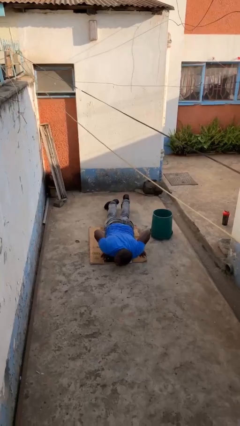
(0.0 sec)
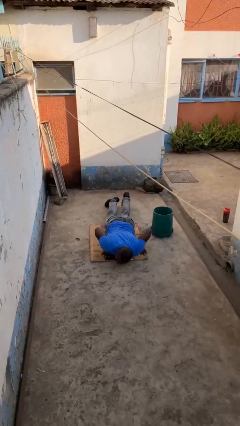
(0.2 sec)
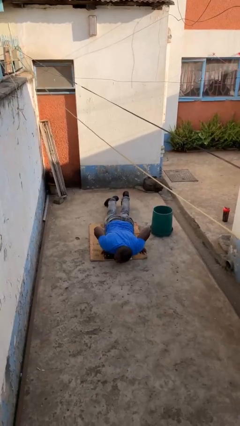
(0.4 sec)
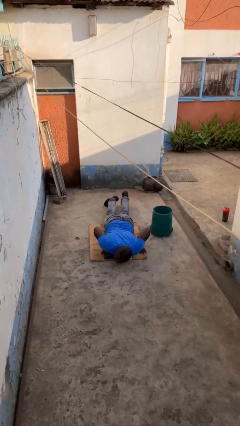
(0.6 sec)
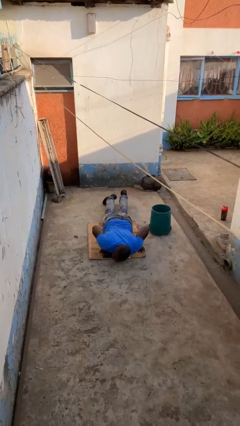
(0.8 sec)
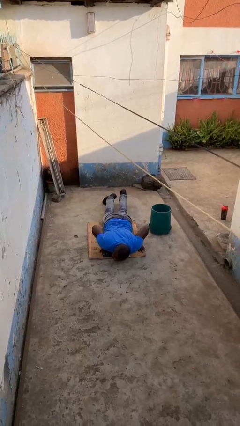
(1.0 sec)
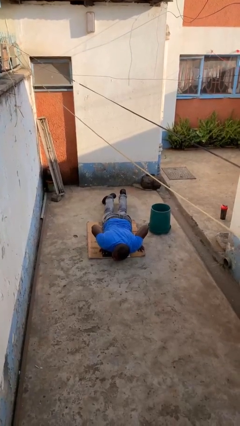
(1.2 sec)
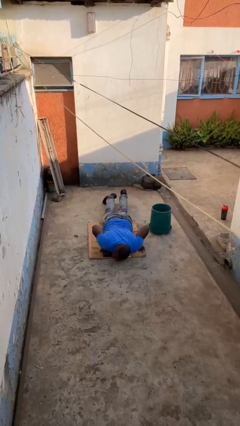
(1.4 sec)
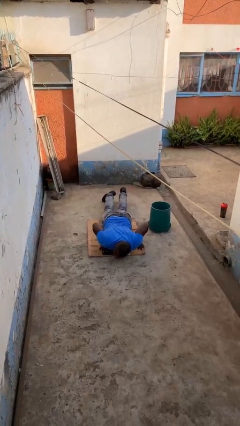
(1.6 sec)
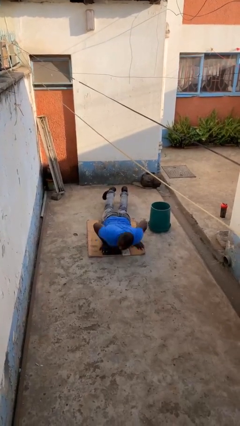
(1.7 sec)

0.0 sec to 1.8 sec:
person lies down on floor

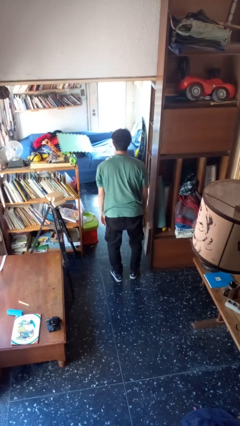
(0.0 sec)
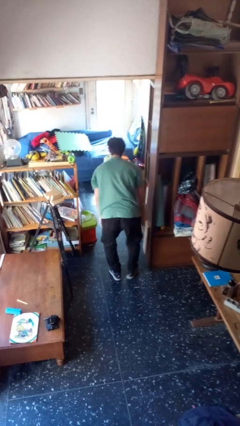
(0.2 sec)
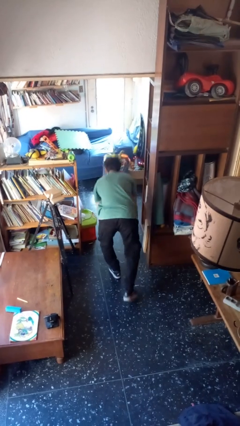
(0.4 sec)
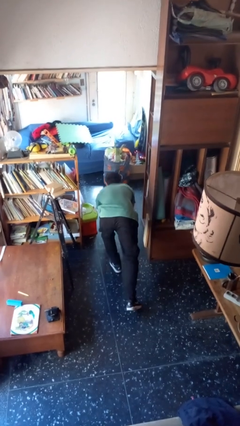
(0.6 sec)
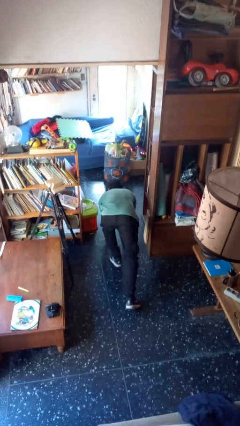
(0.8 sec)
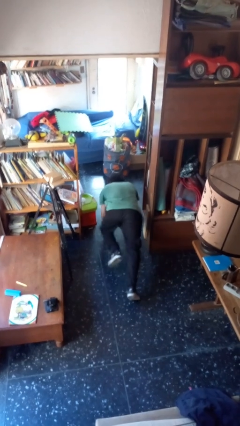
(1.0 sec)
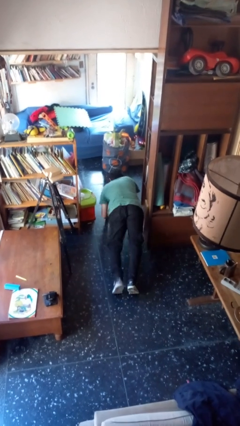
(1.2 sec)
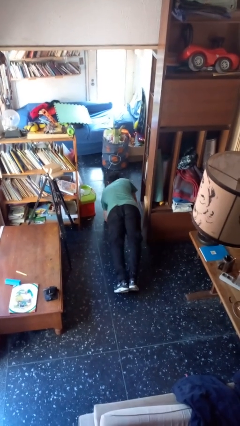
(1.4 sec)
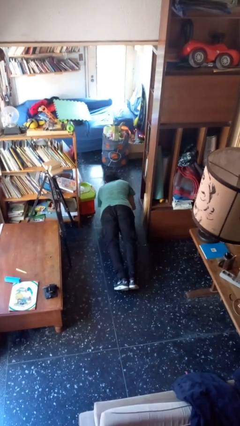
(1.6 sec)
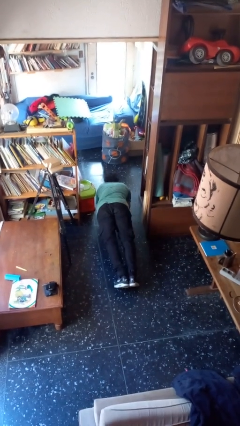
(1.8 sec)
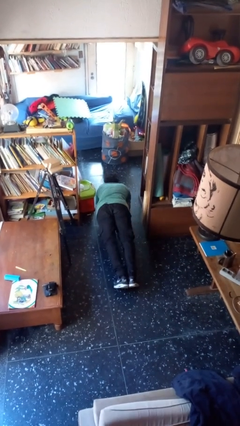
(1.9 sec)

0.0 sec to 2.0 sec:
person exercises with plank

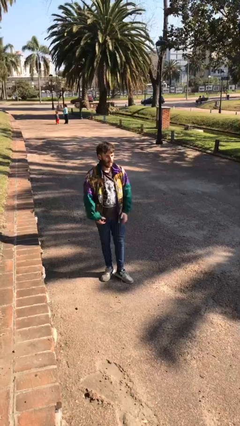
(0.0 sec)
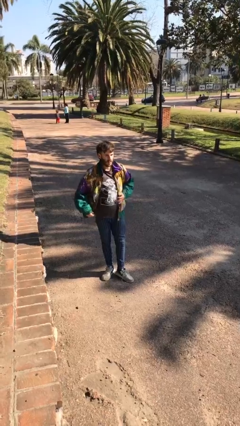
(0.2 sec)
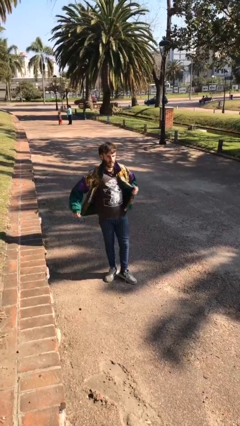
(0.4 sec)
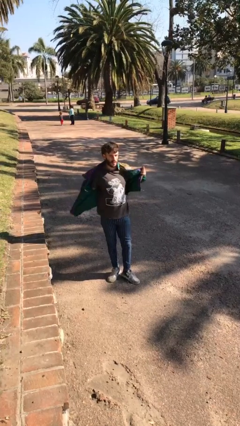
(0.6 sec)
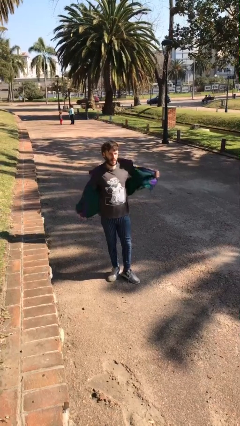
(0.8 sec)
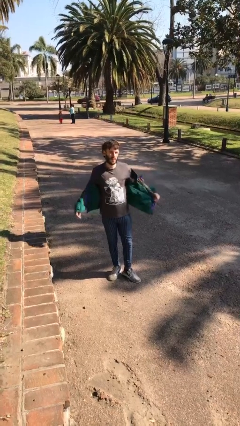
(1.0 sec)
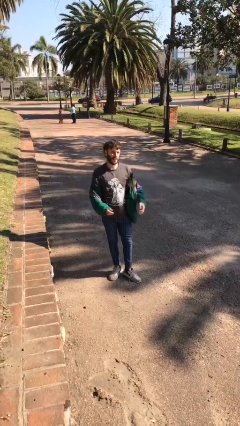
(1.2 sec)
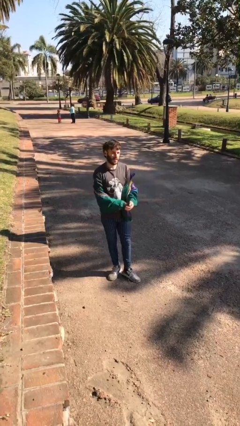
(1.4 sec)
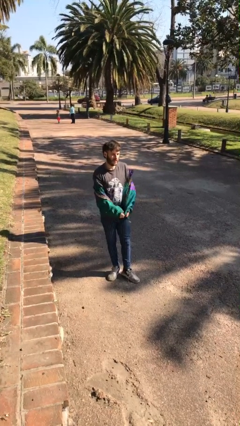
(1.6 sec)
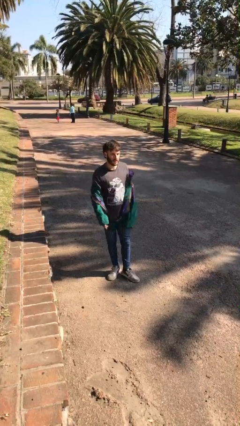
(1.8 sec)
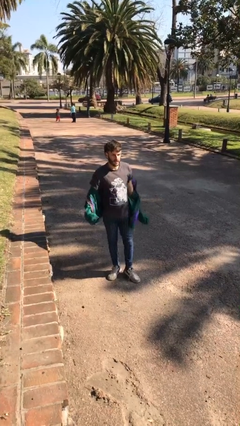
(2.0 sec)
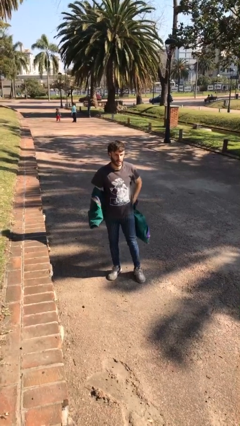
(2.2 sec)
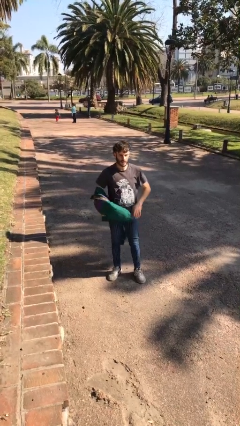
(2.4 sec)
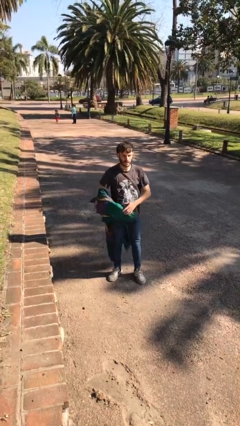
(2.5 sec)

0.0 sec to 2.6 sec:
person takes off jacket

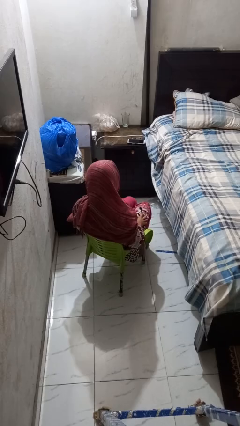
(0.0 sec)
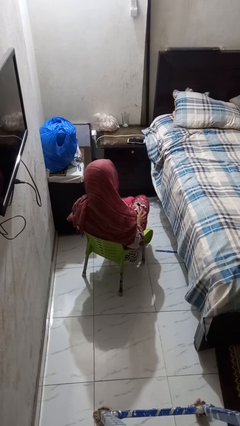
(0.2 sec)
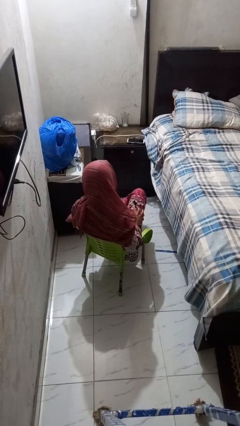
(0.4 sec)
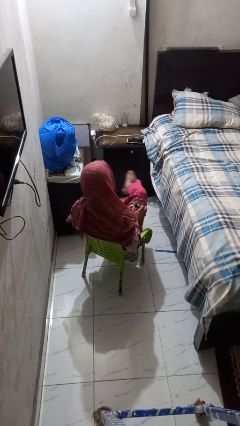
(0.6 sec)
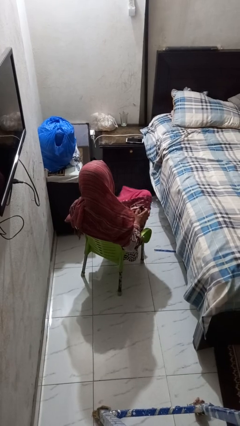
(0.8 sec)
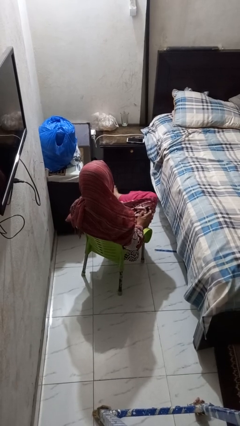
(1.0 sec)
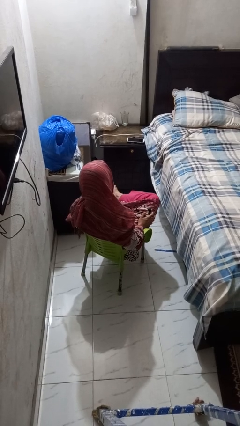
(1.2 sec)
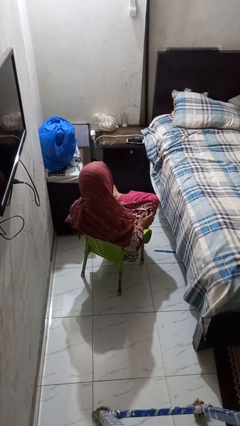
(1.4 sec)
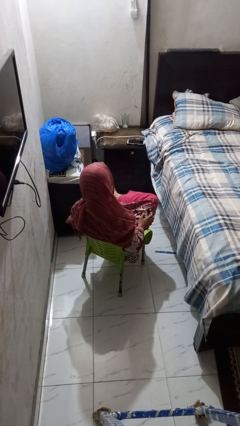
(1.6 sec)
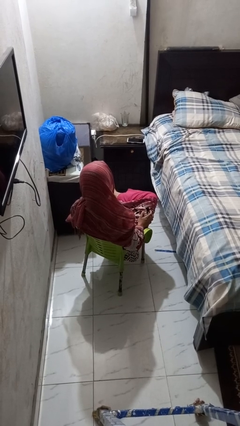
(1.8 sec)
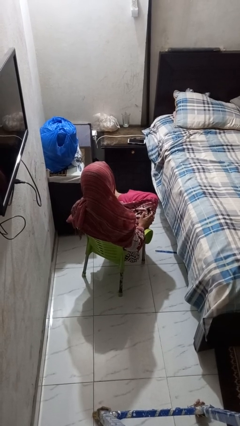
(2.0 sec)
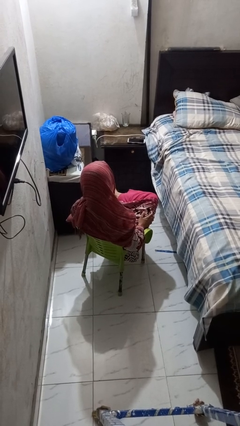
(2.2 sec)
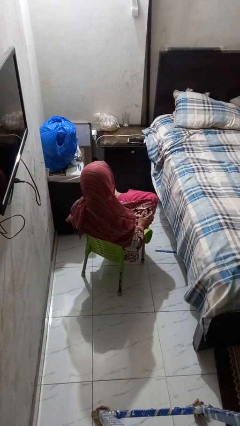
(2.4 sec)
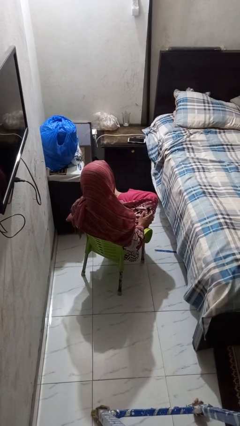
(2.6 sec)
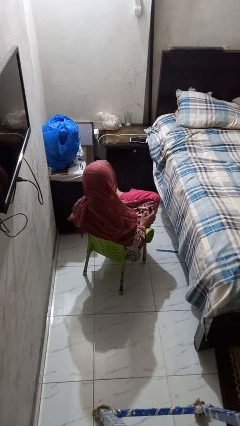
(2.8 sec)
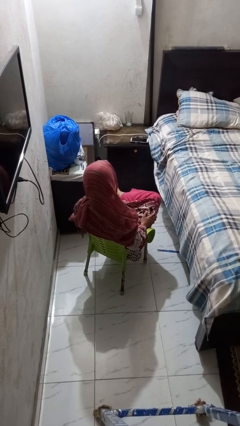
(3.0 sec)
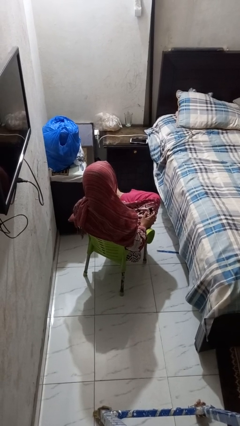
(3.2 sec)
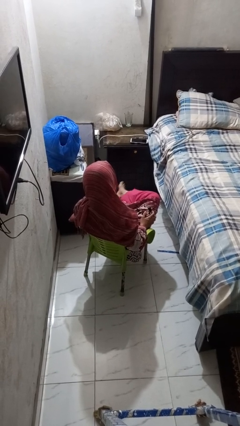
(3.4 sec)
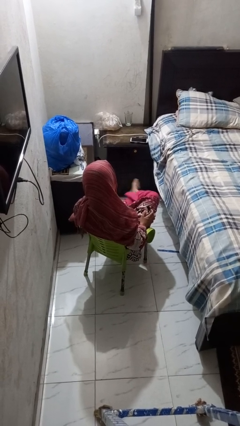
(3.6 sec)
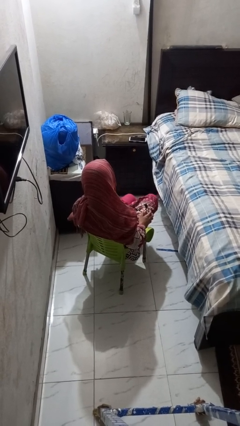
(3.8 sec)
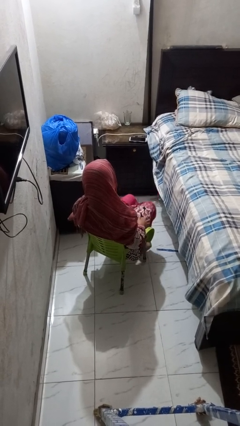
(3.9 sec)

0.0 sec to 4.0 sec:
person crosses legs

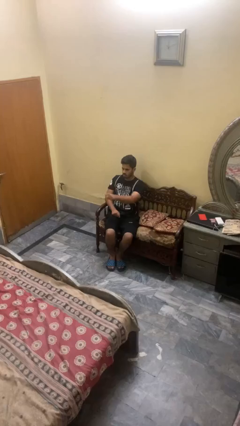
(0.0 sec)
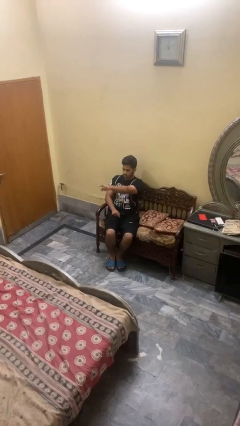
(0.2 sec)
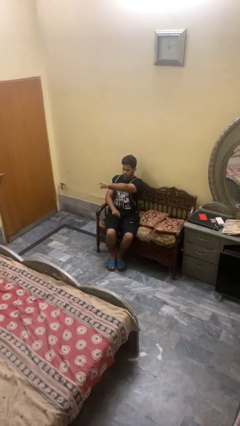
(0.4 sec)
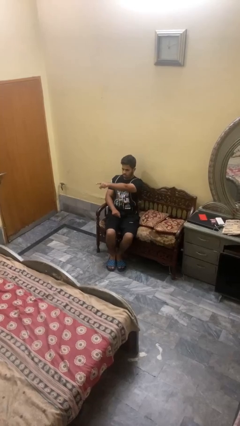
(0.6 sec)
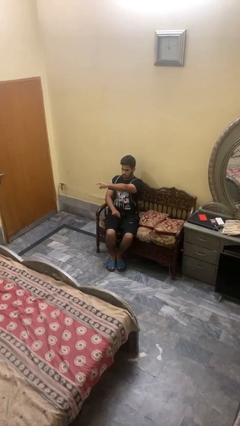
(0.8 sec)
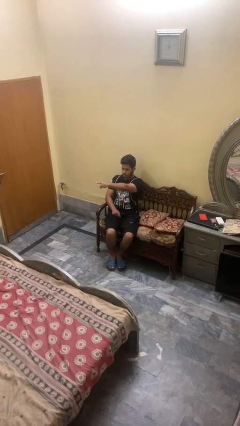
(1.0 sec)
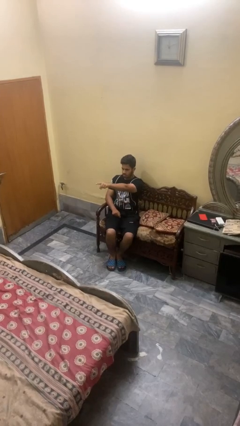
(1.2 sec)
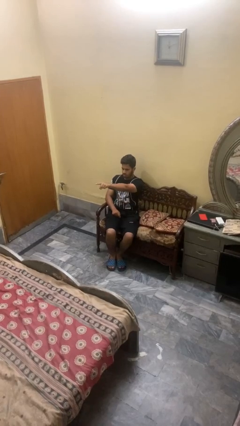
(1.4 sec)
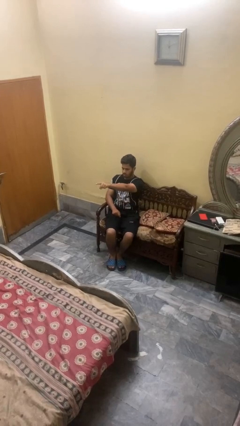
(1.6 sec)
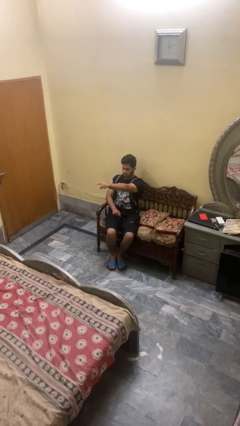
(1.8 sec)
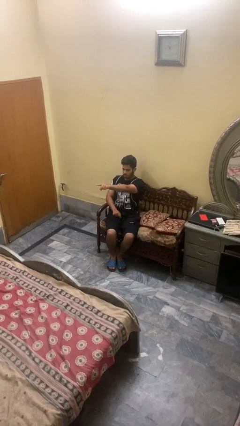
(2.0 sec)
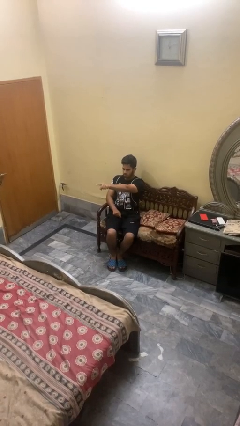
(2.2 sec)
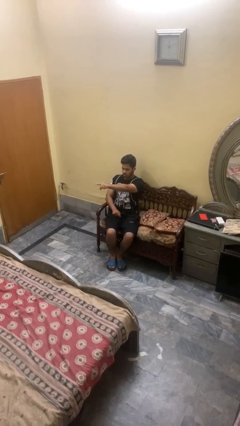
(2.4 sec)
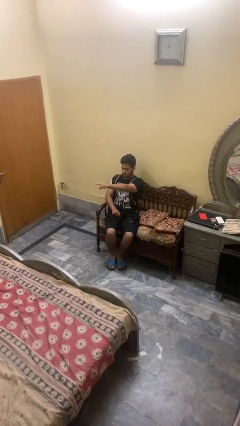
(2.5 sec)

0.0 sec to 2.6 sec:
person points at person

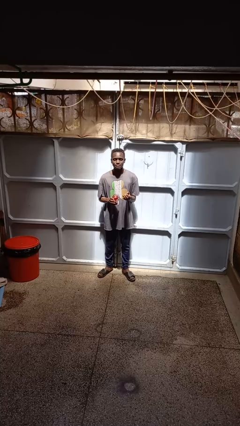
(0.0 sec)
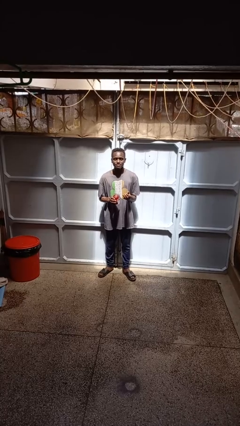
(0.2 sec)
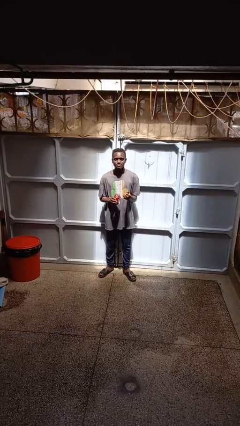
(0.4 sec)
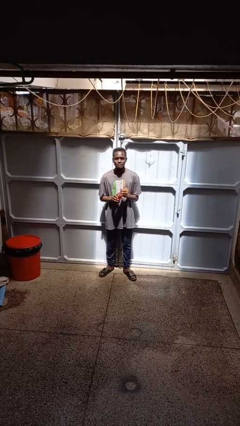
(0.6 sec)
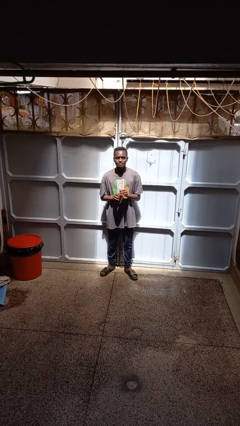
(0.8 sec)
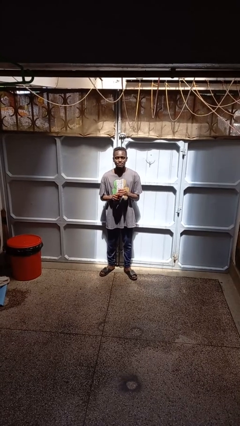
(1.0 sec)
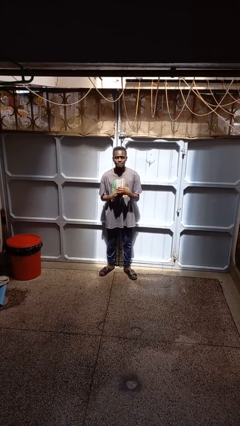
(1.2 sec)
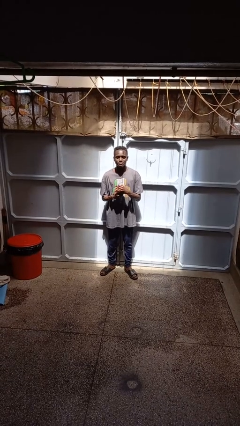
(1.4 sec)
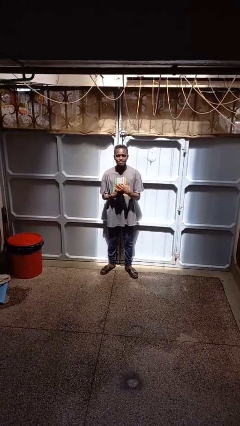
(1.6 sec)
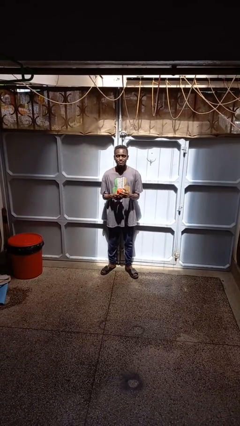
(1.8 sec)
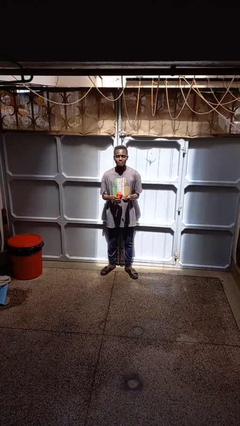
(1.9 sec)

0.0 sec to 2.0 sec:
person closes jar

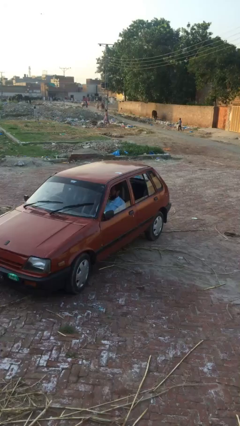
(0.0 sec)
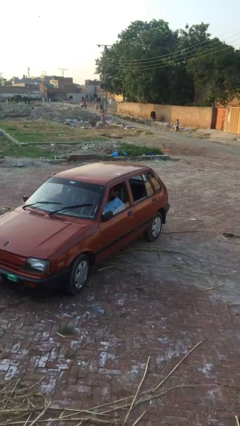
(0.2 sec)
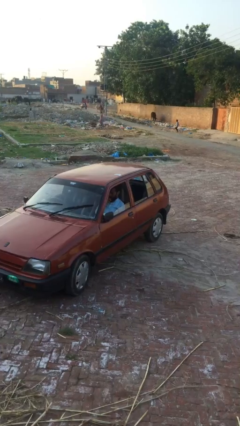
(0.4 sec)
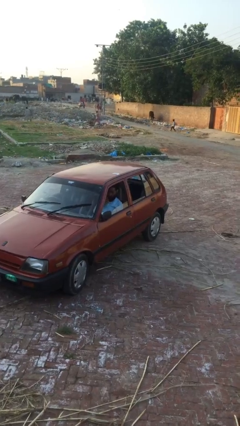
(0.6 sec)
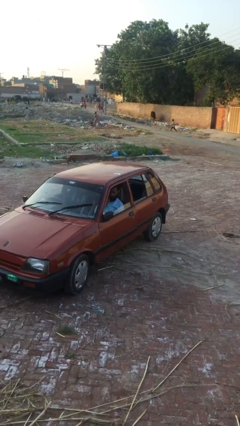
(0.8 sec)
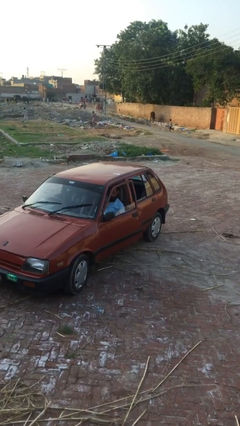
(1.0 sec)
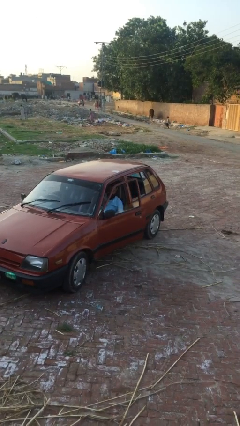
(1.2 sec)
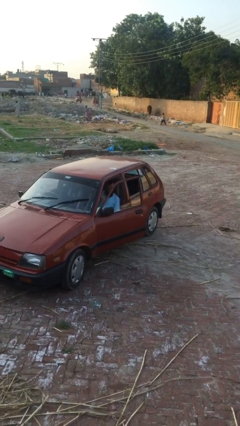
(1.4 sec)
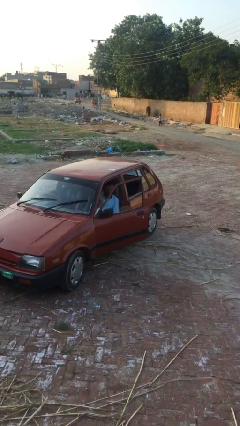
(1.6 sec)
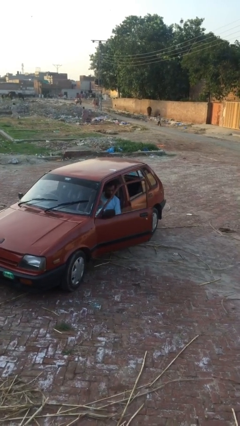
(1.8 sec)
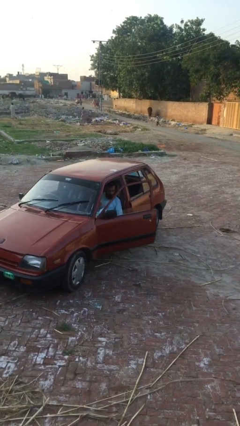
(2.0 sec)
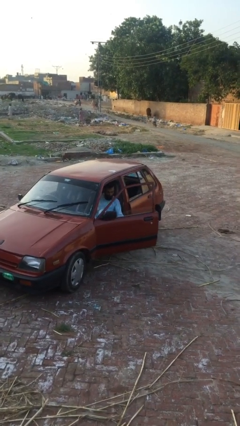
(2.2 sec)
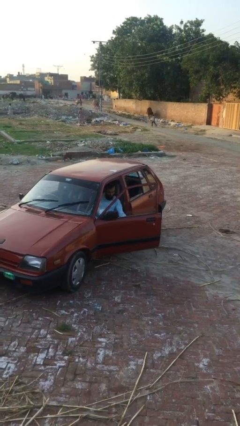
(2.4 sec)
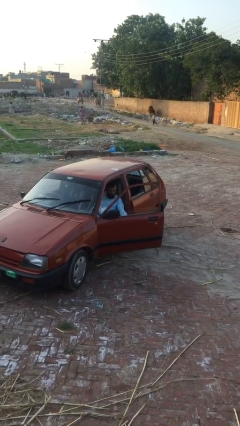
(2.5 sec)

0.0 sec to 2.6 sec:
person opens car door
